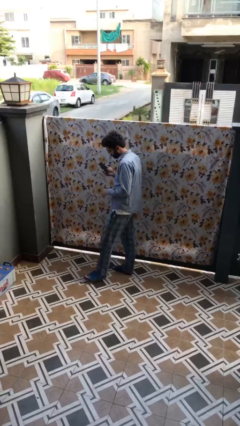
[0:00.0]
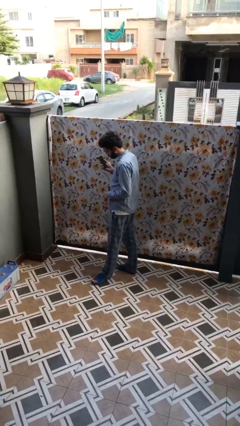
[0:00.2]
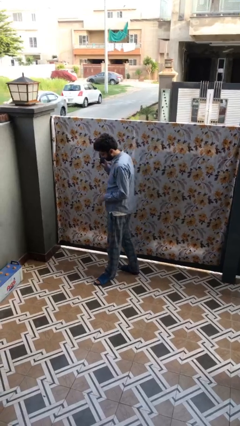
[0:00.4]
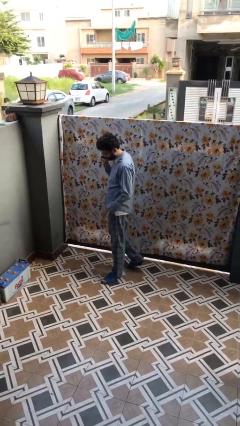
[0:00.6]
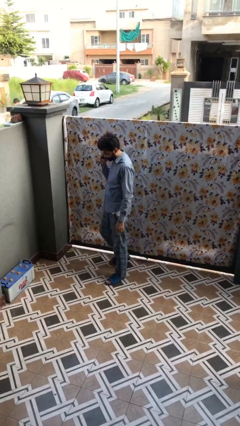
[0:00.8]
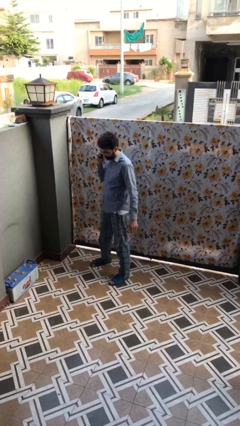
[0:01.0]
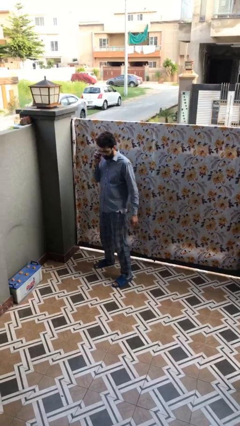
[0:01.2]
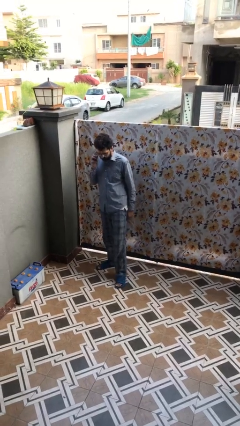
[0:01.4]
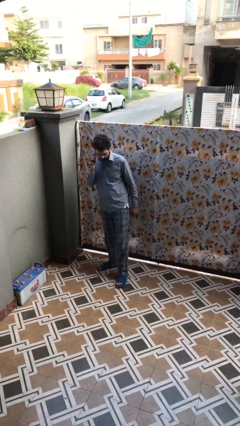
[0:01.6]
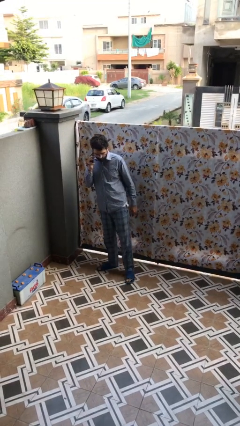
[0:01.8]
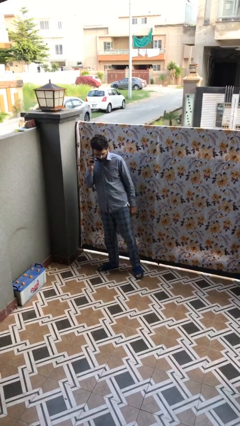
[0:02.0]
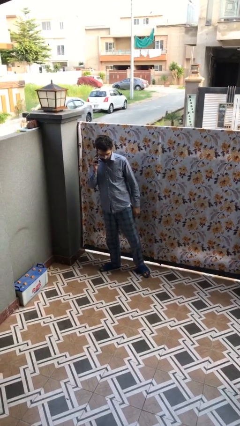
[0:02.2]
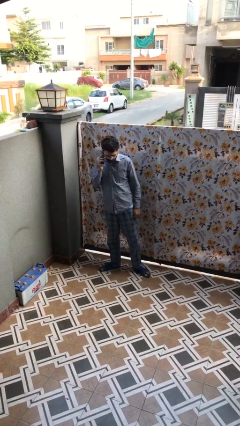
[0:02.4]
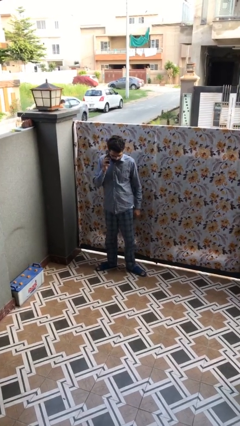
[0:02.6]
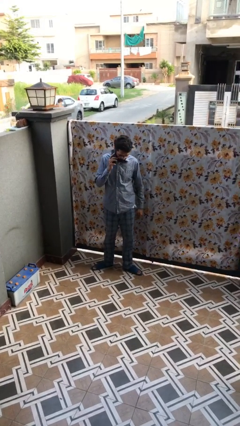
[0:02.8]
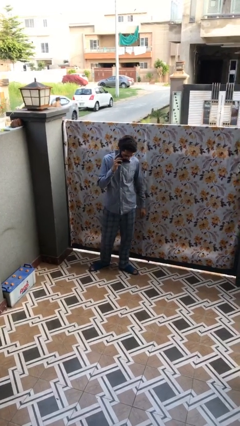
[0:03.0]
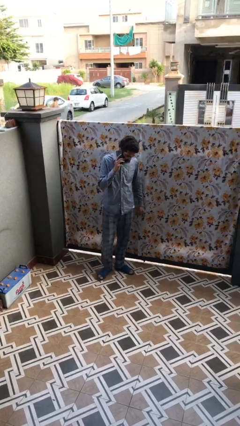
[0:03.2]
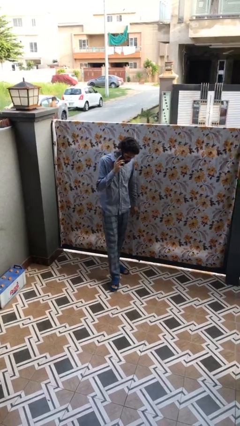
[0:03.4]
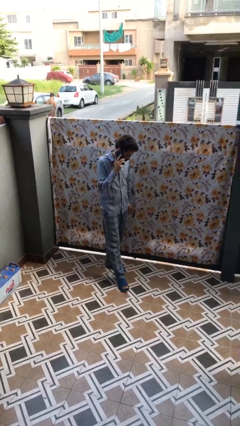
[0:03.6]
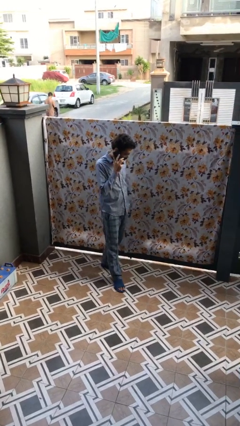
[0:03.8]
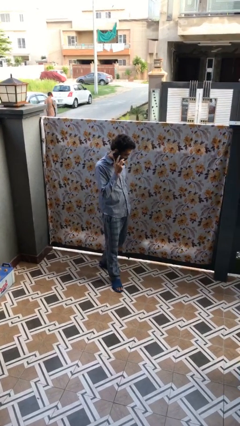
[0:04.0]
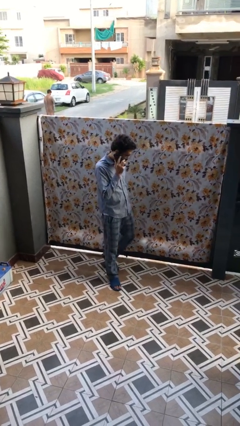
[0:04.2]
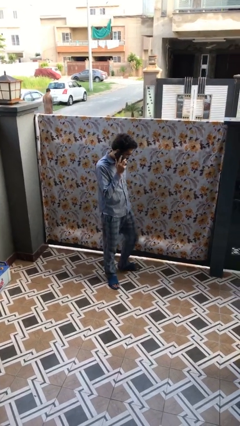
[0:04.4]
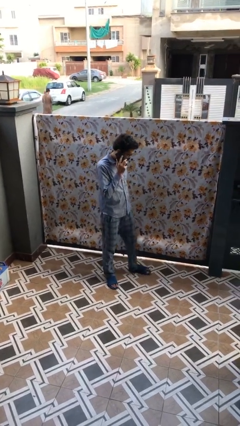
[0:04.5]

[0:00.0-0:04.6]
person talks on phone

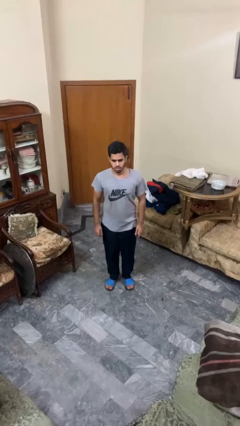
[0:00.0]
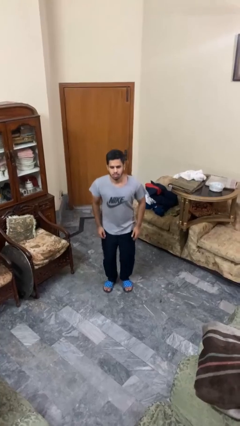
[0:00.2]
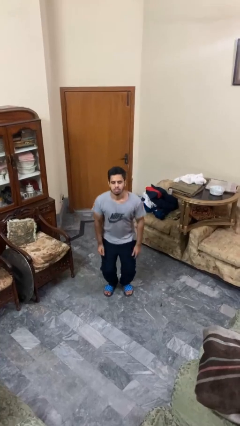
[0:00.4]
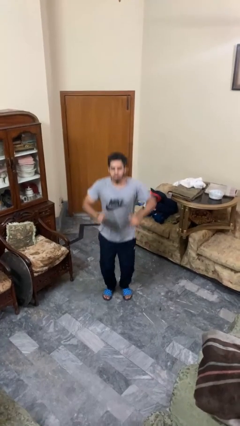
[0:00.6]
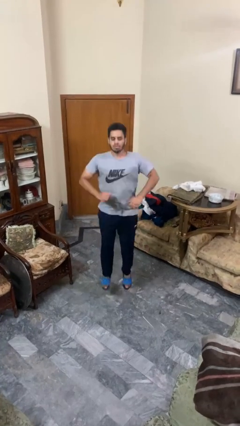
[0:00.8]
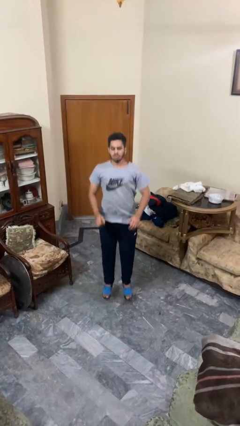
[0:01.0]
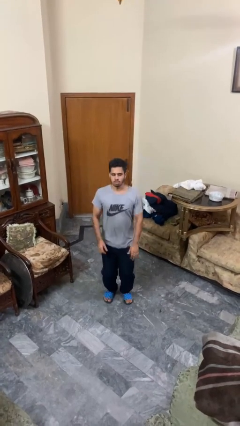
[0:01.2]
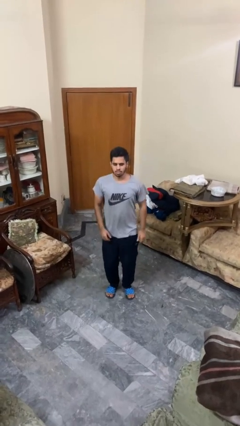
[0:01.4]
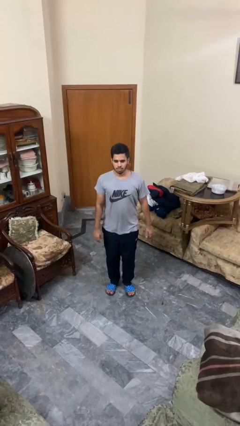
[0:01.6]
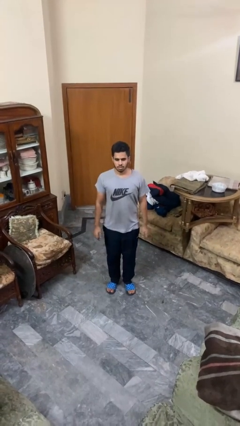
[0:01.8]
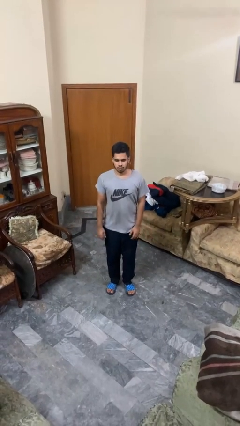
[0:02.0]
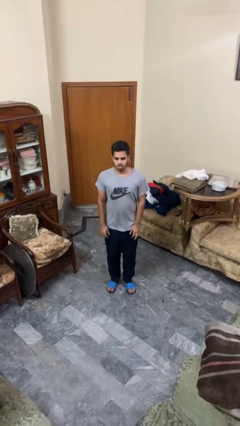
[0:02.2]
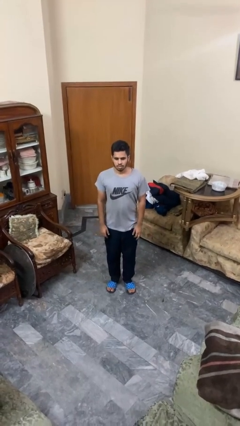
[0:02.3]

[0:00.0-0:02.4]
person jumps

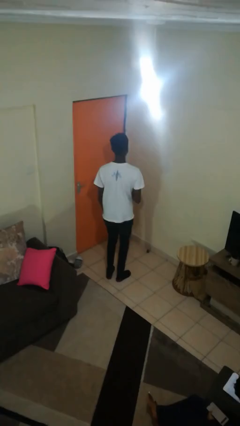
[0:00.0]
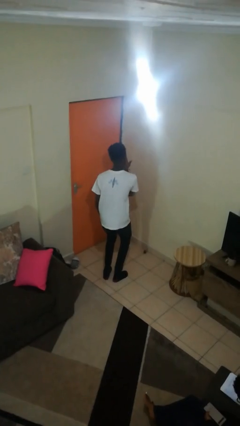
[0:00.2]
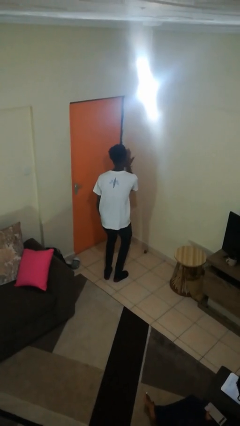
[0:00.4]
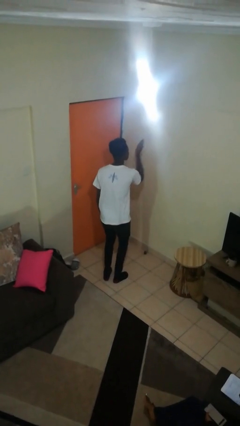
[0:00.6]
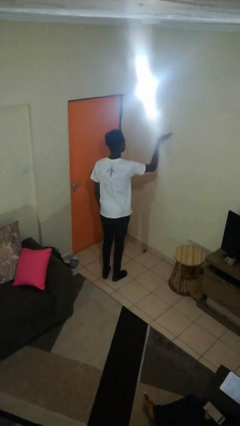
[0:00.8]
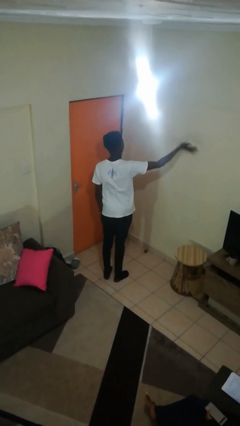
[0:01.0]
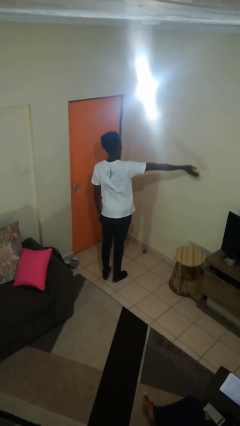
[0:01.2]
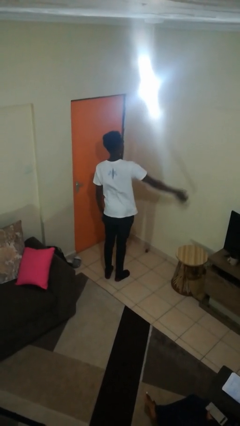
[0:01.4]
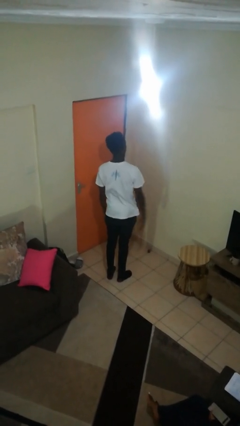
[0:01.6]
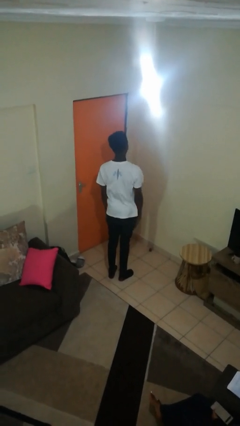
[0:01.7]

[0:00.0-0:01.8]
person gestures blow kiss

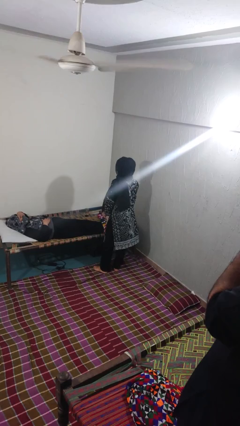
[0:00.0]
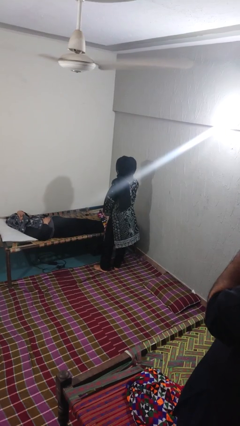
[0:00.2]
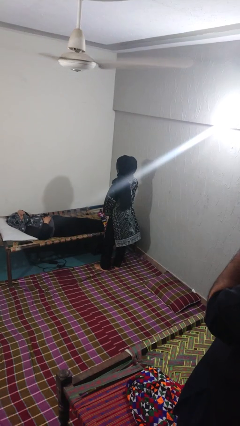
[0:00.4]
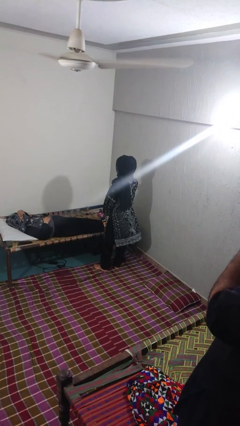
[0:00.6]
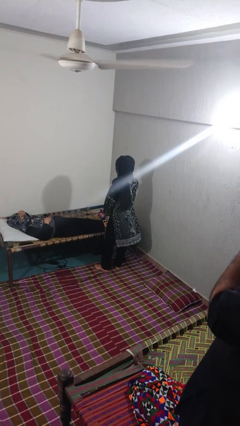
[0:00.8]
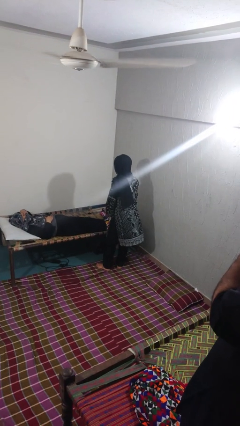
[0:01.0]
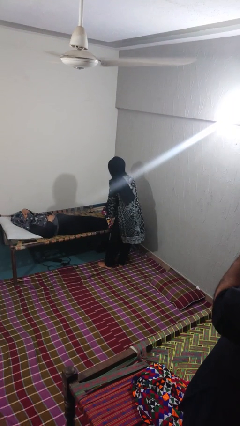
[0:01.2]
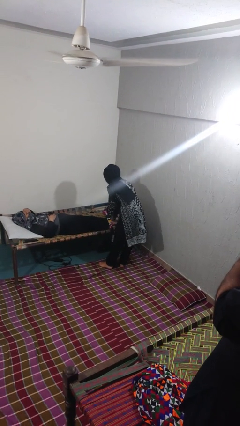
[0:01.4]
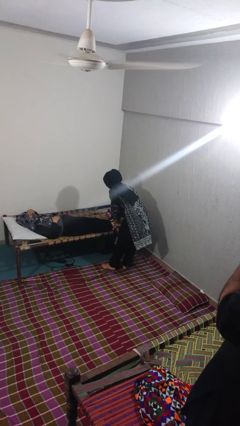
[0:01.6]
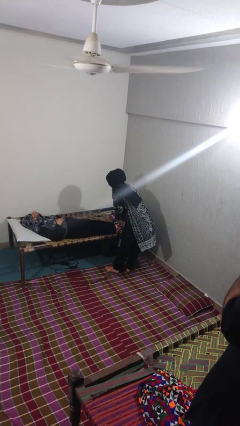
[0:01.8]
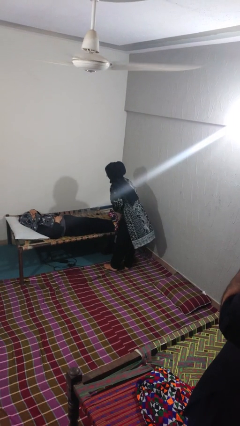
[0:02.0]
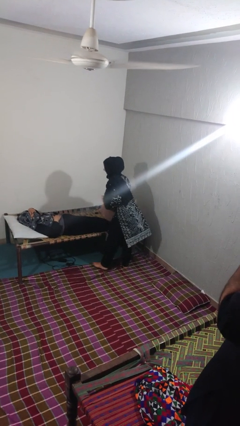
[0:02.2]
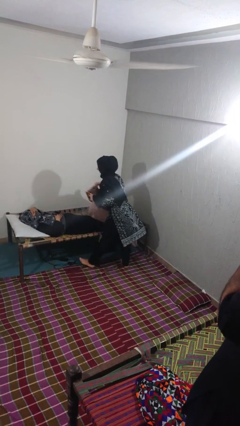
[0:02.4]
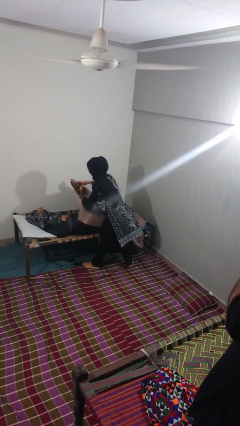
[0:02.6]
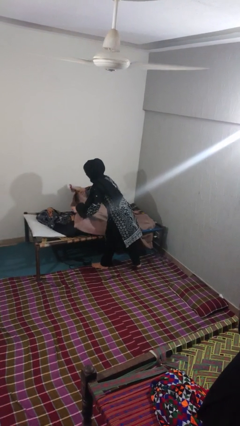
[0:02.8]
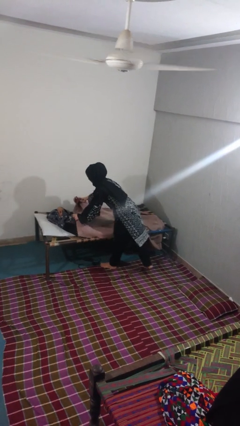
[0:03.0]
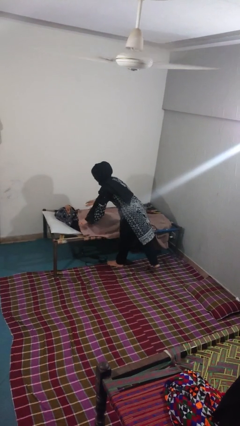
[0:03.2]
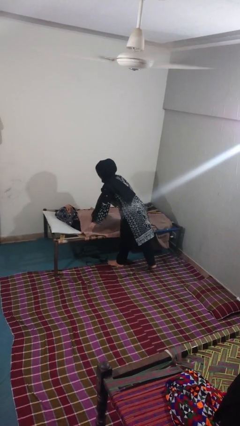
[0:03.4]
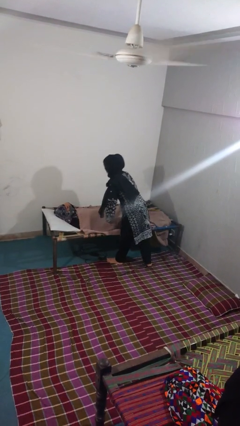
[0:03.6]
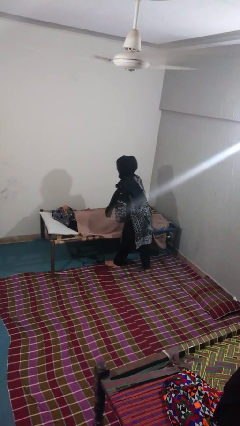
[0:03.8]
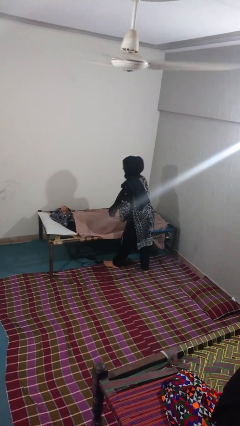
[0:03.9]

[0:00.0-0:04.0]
person covers friend with blanket

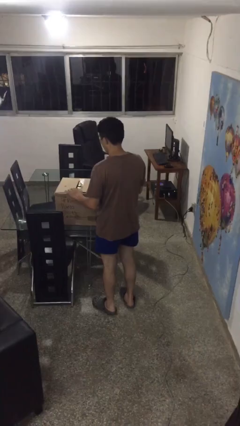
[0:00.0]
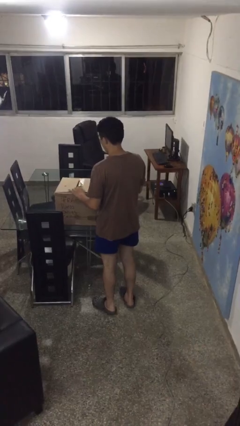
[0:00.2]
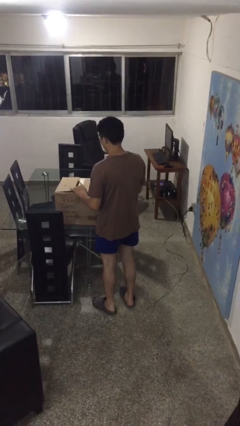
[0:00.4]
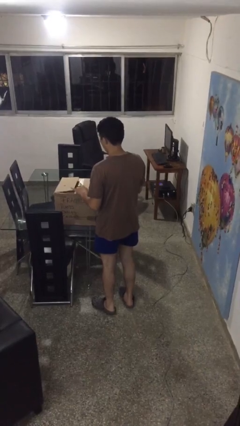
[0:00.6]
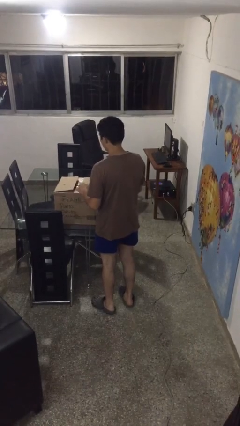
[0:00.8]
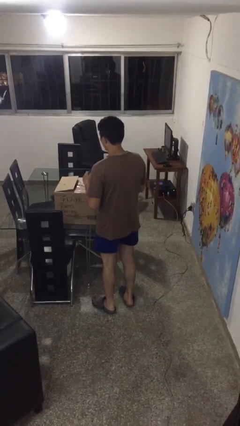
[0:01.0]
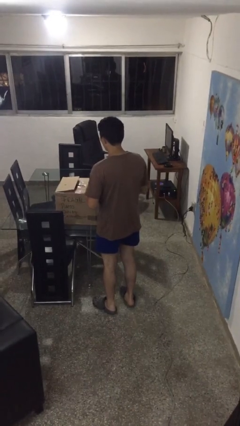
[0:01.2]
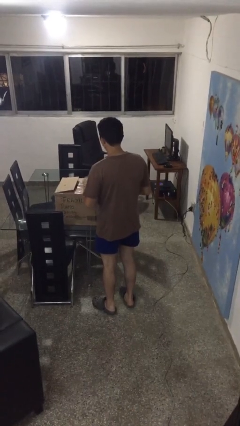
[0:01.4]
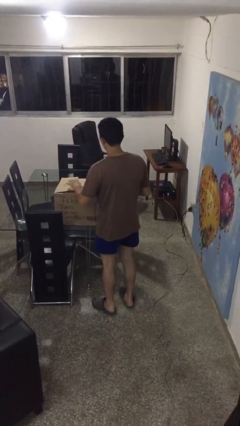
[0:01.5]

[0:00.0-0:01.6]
person opens box

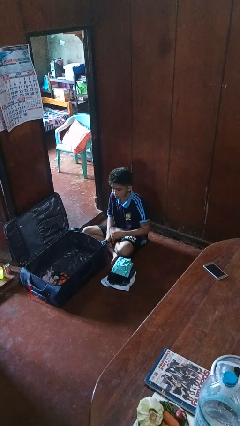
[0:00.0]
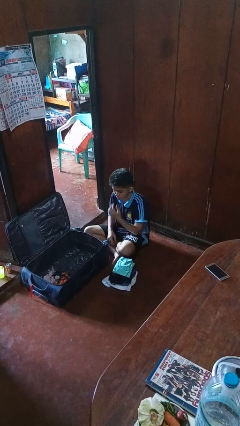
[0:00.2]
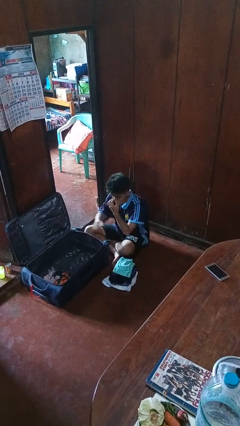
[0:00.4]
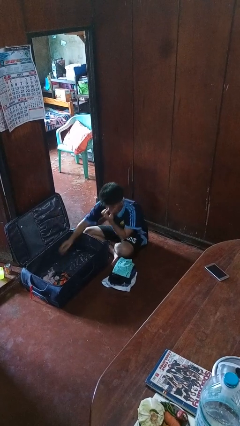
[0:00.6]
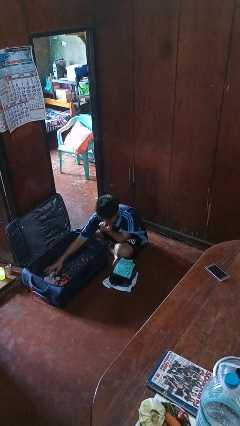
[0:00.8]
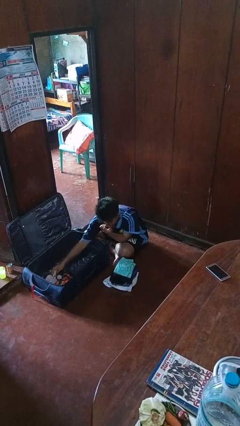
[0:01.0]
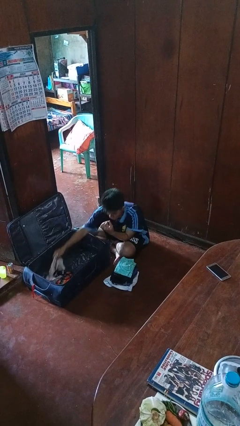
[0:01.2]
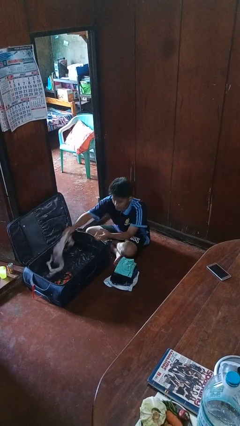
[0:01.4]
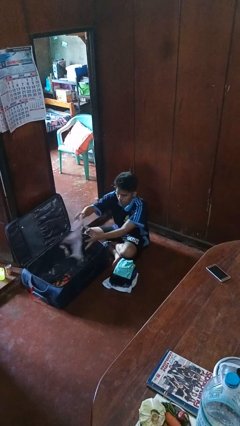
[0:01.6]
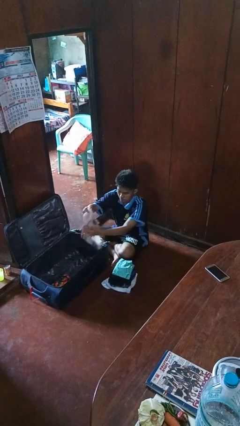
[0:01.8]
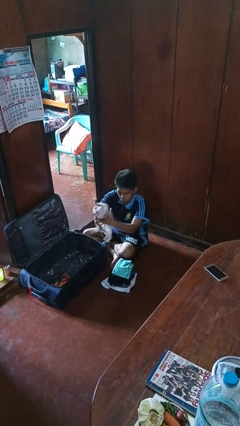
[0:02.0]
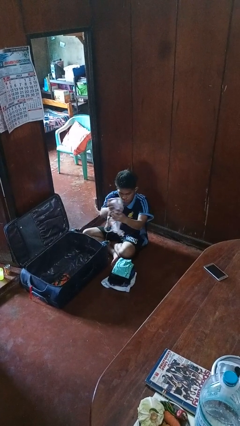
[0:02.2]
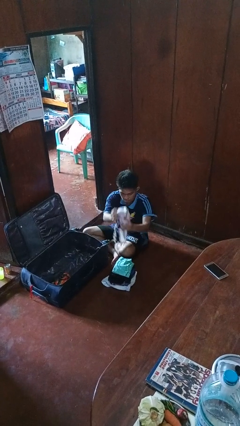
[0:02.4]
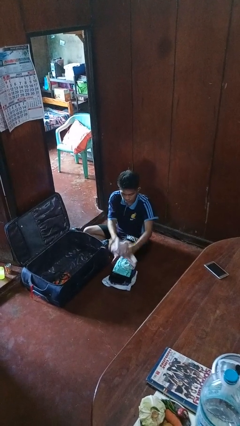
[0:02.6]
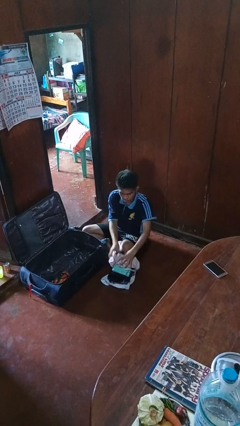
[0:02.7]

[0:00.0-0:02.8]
person unloads clothes from suitcase
